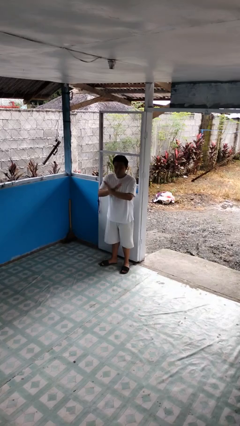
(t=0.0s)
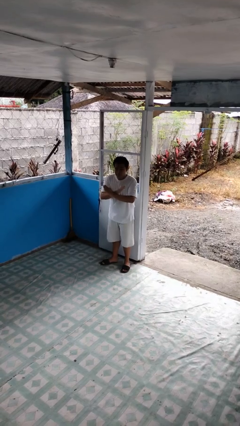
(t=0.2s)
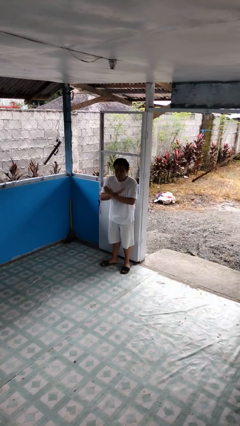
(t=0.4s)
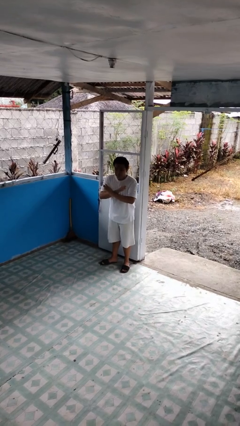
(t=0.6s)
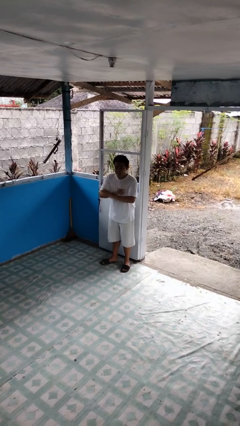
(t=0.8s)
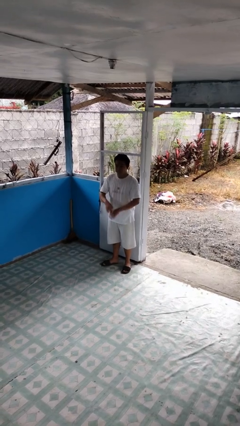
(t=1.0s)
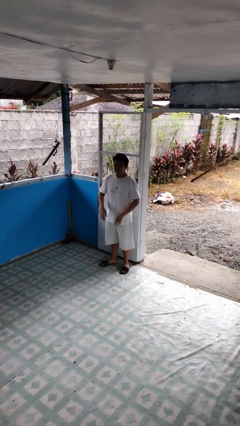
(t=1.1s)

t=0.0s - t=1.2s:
person gestures arms x

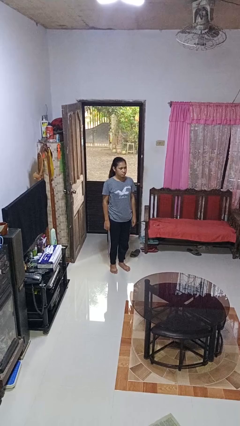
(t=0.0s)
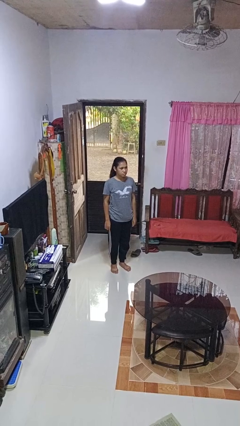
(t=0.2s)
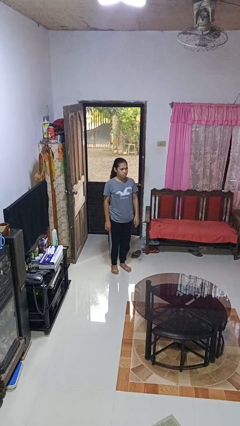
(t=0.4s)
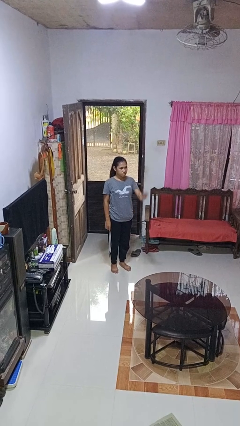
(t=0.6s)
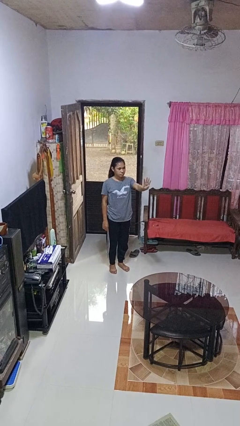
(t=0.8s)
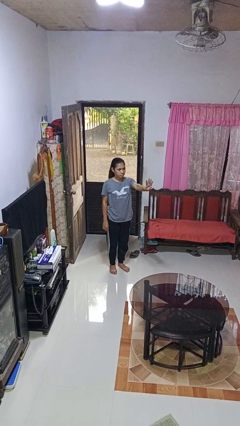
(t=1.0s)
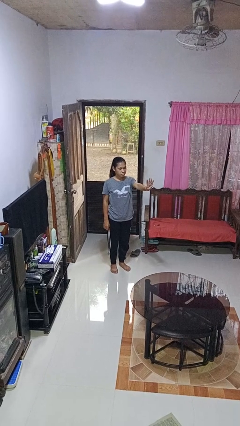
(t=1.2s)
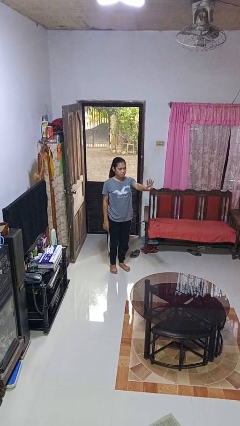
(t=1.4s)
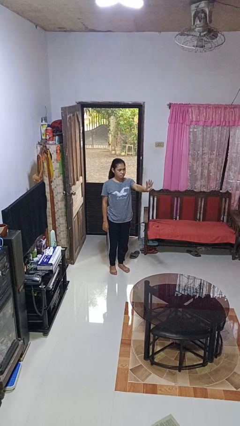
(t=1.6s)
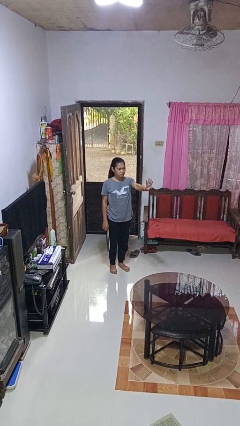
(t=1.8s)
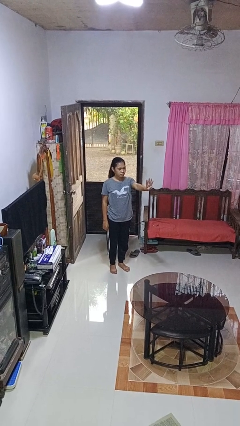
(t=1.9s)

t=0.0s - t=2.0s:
person gestures number four

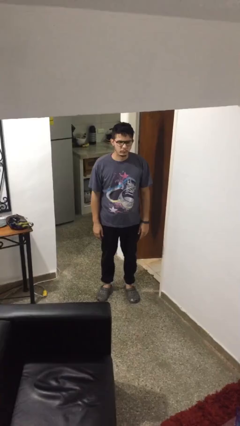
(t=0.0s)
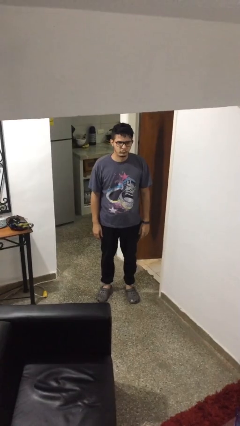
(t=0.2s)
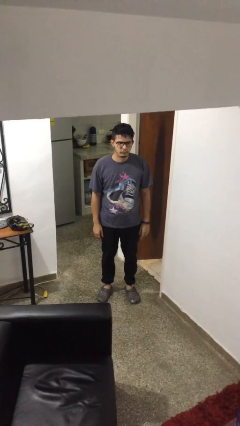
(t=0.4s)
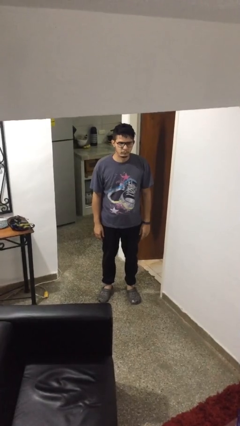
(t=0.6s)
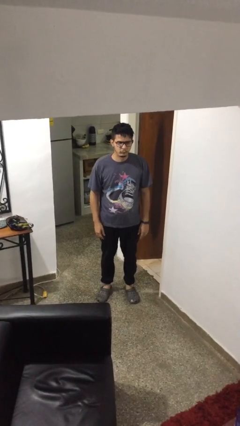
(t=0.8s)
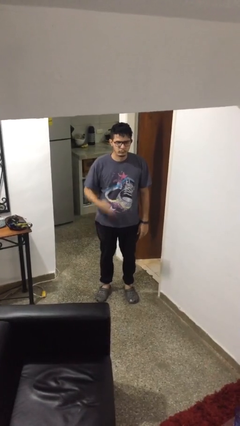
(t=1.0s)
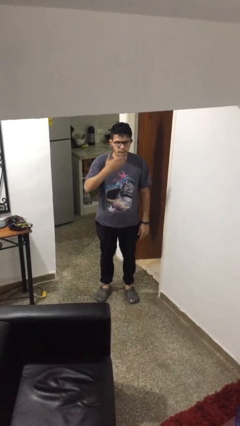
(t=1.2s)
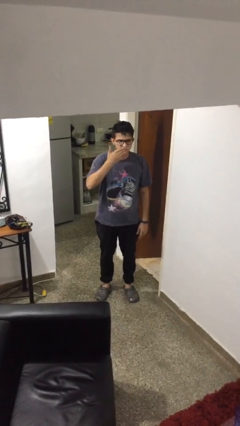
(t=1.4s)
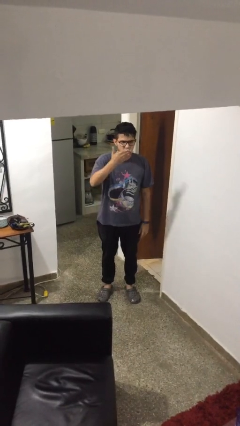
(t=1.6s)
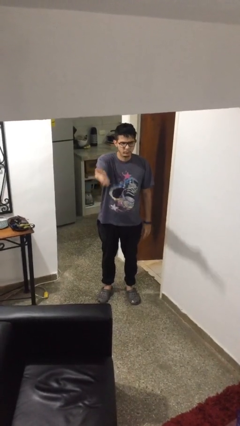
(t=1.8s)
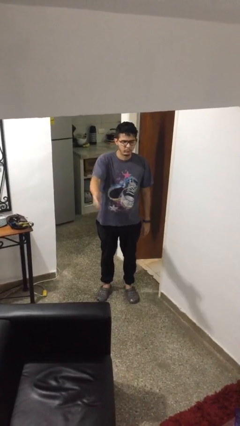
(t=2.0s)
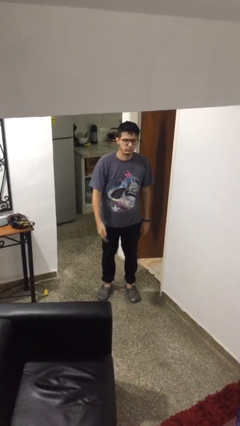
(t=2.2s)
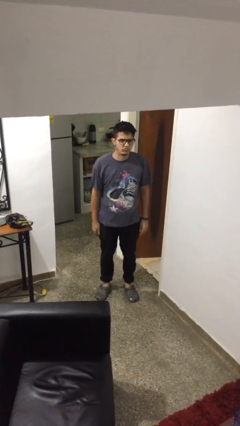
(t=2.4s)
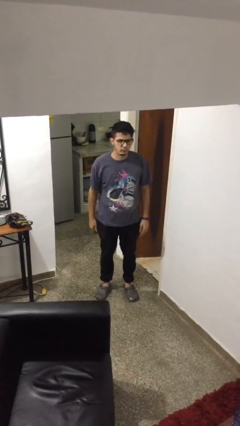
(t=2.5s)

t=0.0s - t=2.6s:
person gestures blow kiss

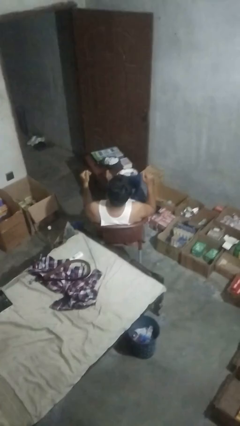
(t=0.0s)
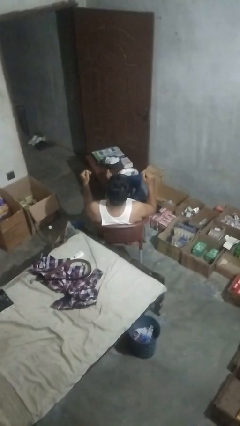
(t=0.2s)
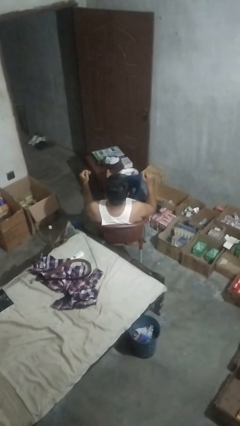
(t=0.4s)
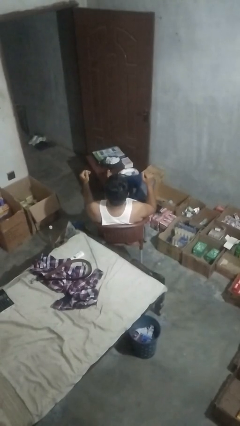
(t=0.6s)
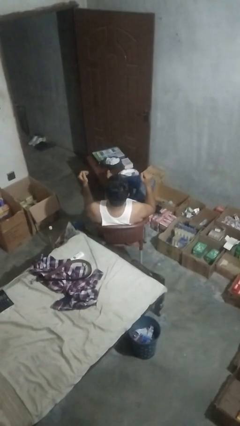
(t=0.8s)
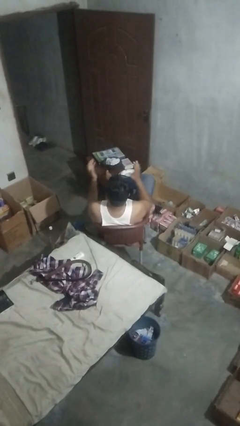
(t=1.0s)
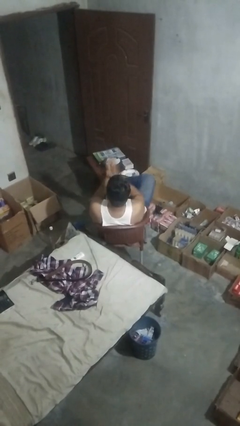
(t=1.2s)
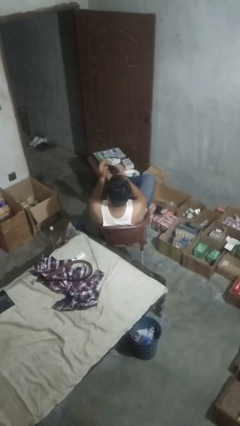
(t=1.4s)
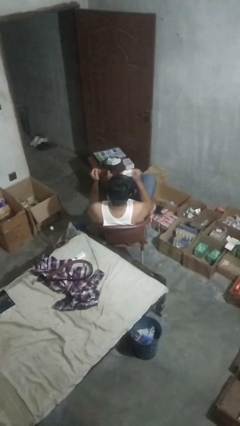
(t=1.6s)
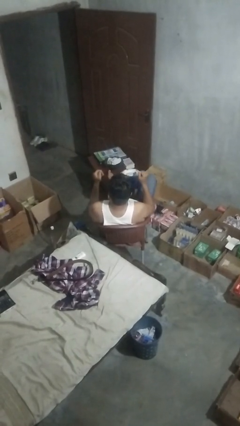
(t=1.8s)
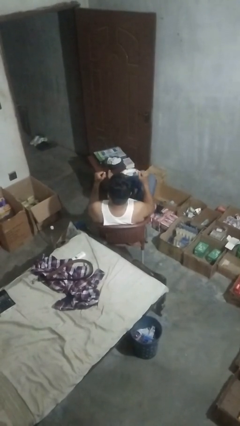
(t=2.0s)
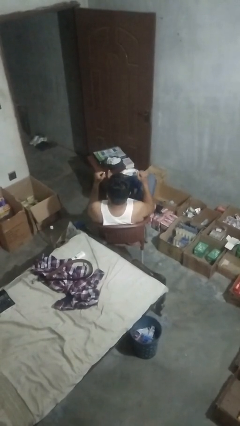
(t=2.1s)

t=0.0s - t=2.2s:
person claps hands

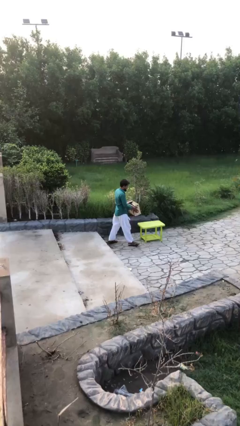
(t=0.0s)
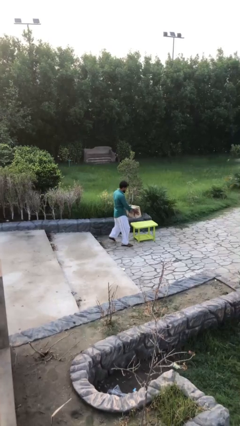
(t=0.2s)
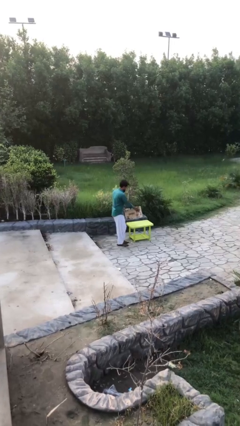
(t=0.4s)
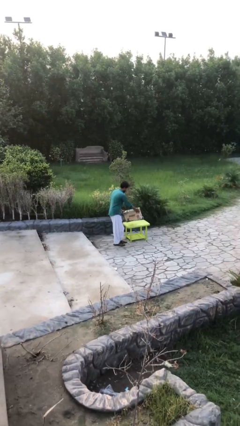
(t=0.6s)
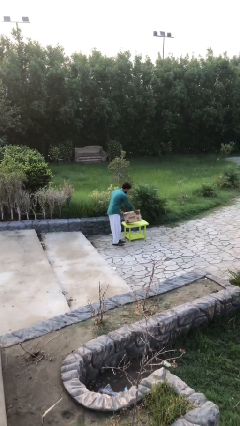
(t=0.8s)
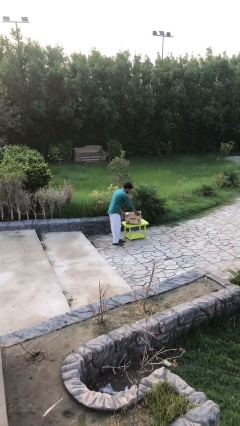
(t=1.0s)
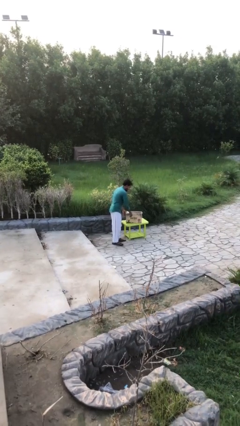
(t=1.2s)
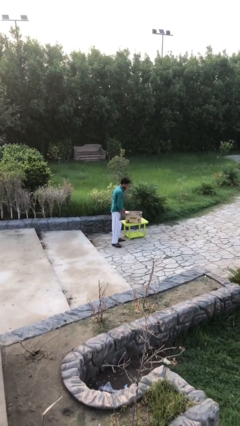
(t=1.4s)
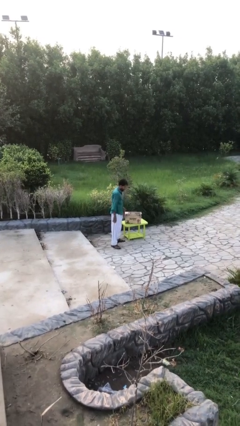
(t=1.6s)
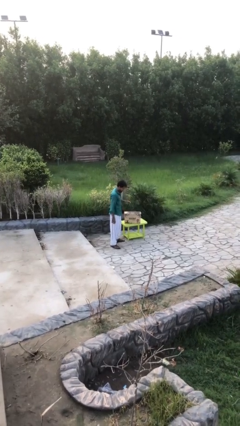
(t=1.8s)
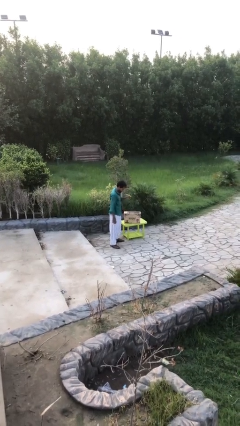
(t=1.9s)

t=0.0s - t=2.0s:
person puts down object on table

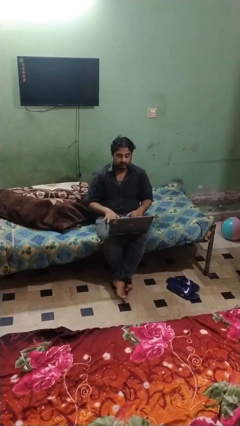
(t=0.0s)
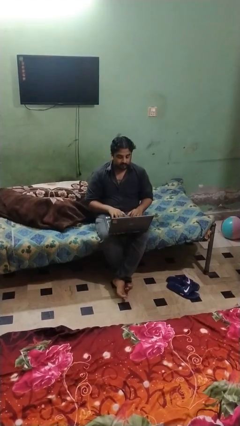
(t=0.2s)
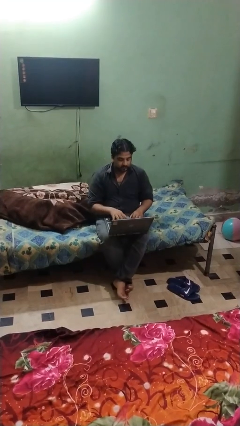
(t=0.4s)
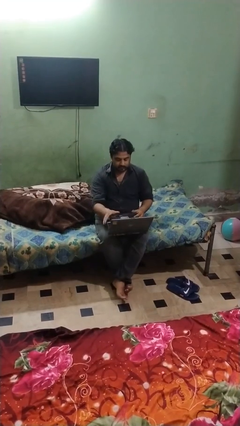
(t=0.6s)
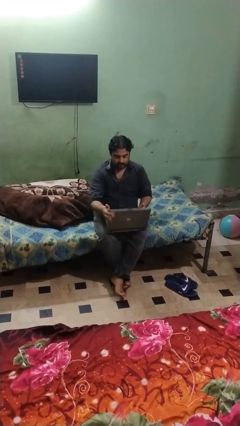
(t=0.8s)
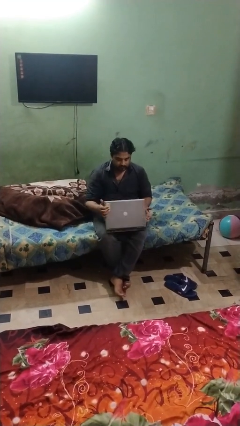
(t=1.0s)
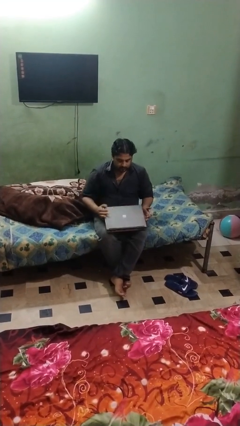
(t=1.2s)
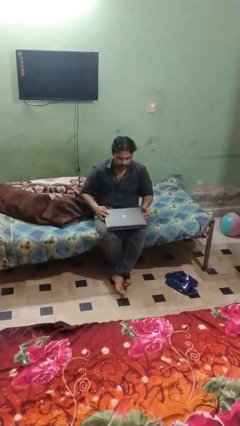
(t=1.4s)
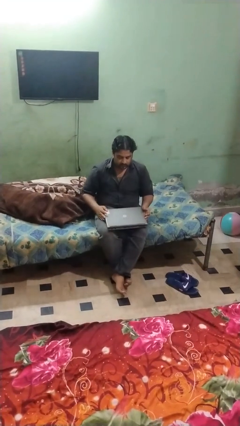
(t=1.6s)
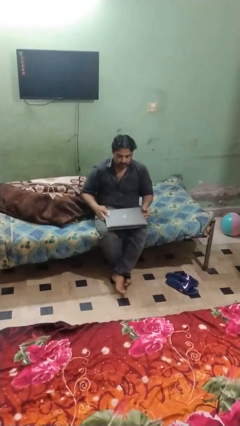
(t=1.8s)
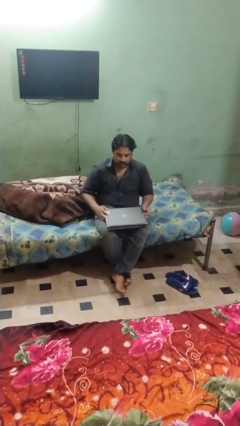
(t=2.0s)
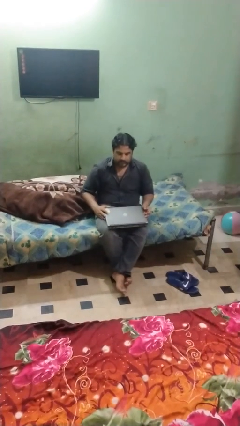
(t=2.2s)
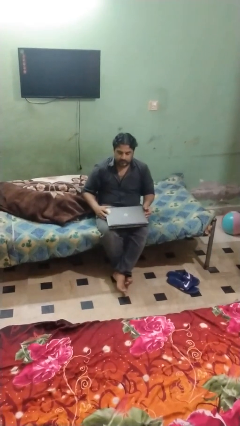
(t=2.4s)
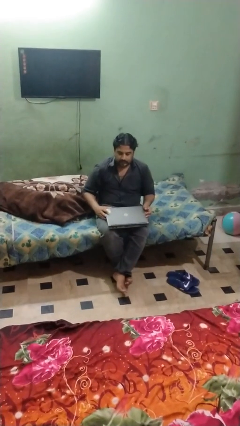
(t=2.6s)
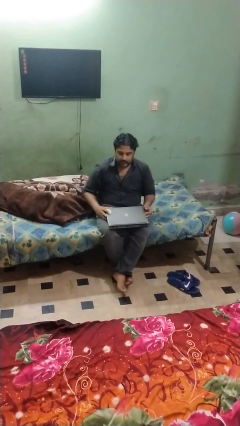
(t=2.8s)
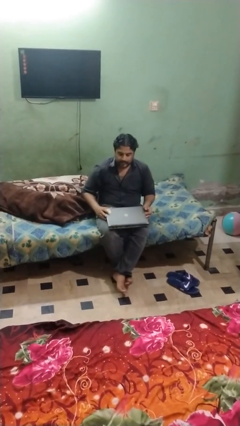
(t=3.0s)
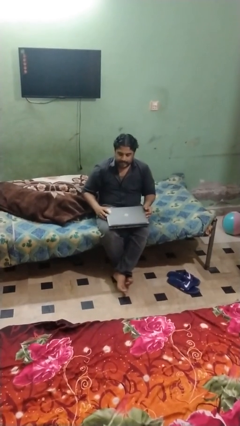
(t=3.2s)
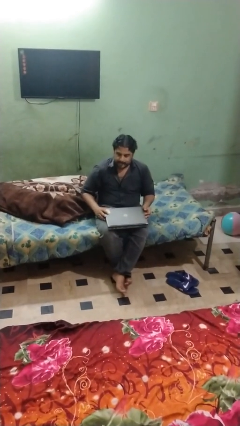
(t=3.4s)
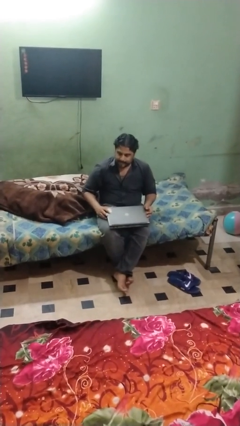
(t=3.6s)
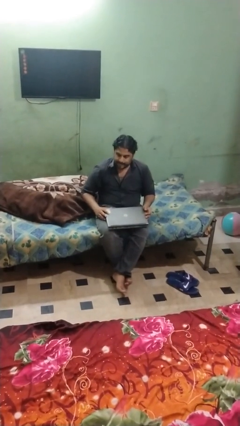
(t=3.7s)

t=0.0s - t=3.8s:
person closes laptop

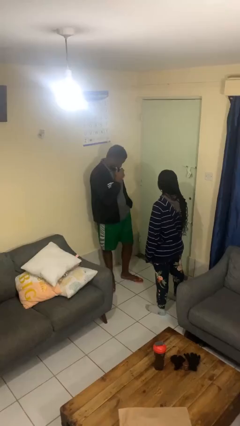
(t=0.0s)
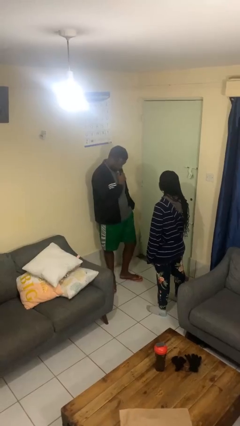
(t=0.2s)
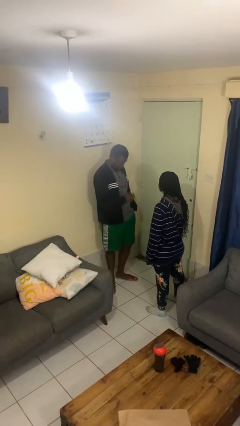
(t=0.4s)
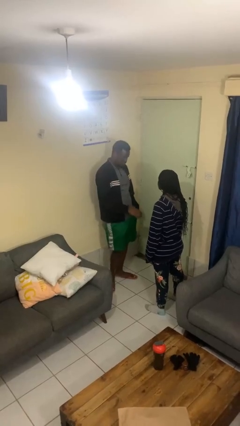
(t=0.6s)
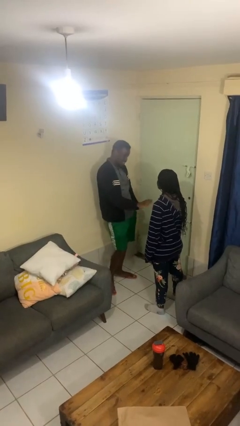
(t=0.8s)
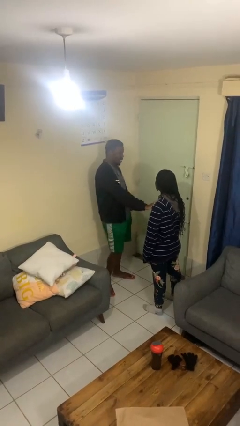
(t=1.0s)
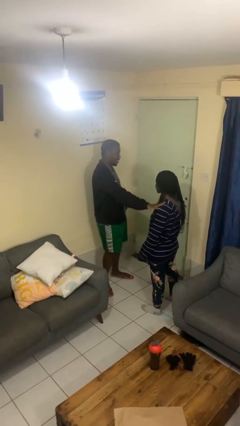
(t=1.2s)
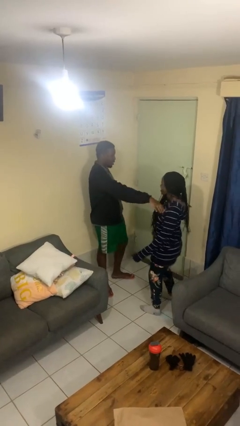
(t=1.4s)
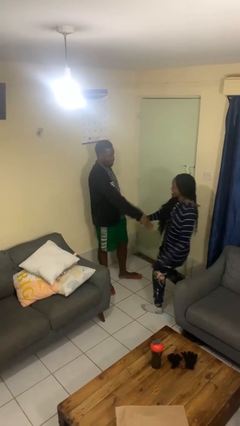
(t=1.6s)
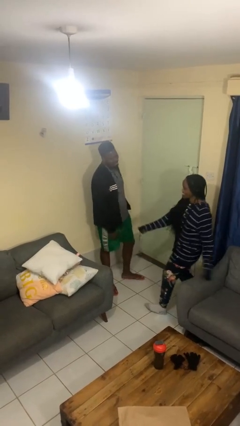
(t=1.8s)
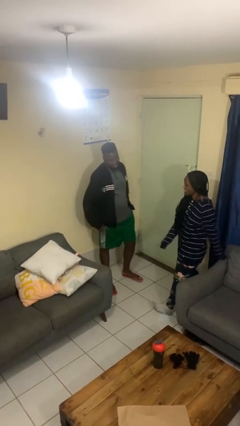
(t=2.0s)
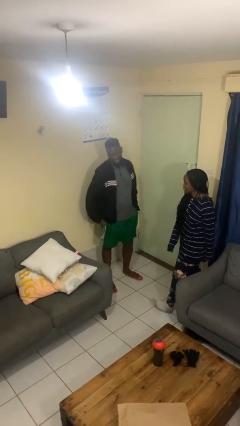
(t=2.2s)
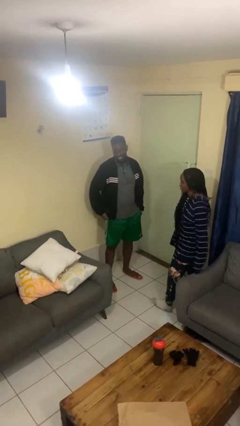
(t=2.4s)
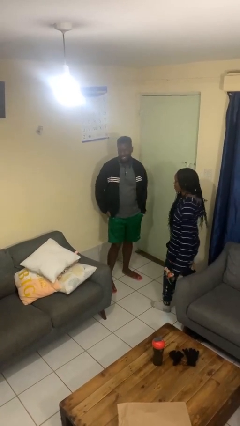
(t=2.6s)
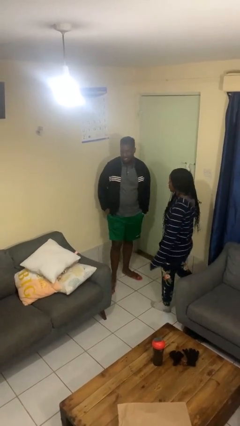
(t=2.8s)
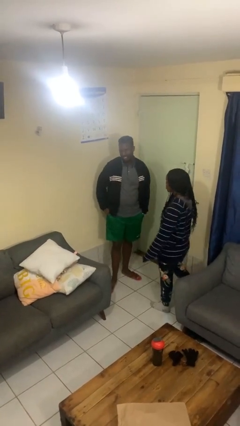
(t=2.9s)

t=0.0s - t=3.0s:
person shoves person

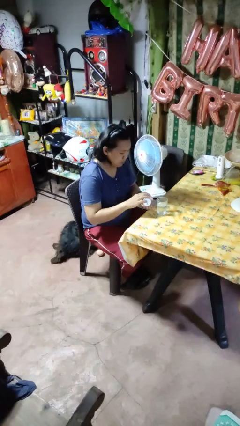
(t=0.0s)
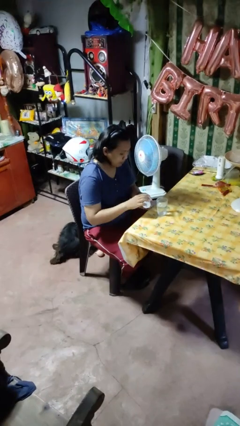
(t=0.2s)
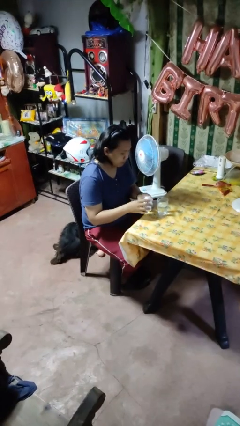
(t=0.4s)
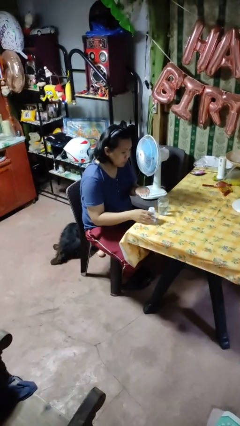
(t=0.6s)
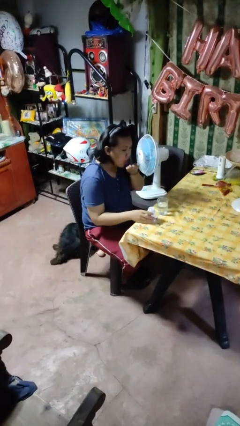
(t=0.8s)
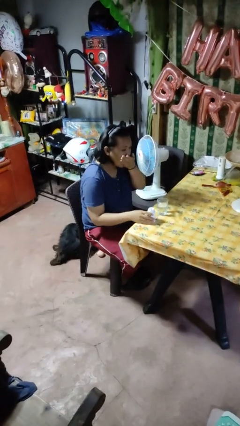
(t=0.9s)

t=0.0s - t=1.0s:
person takes medicine pills
